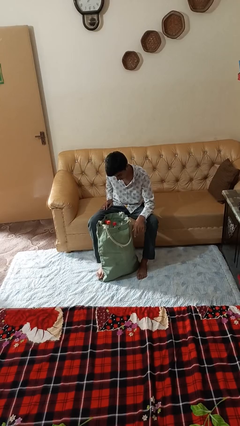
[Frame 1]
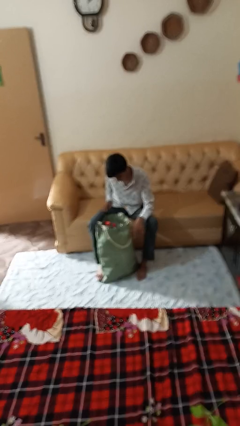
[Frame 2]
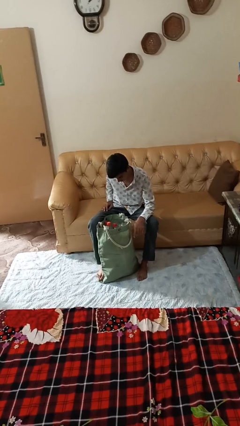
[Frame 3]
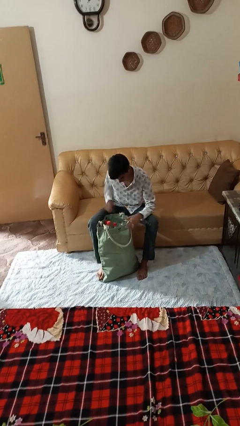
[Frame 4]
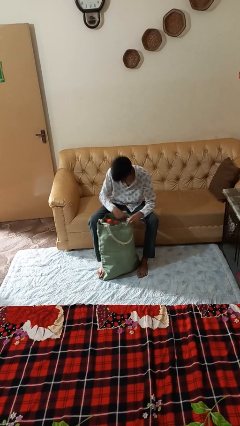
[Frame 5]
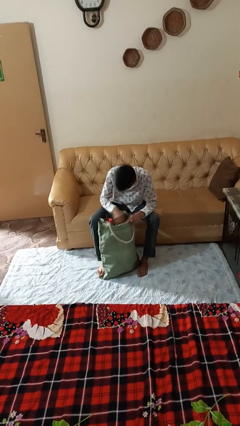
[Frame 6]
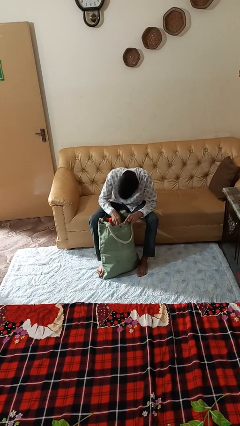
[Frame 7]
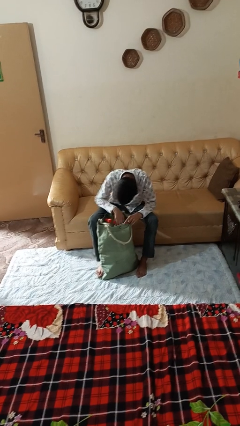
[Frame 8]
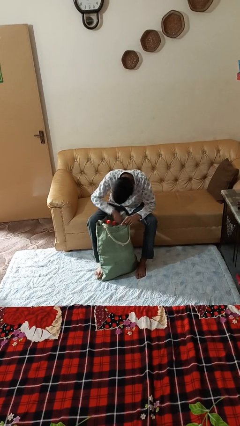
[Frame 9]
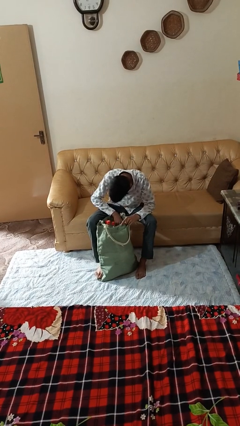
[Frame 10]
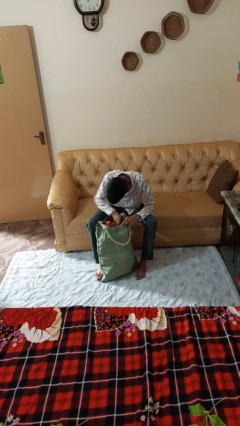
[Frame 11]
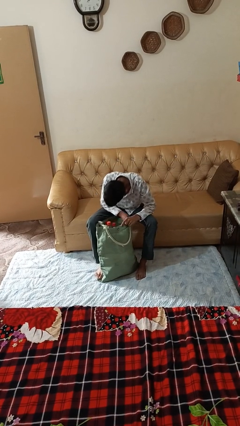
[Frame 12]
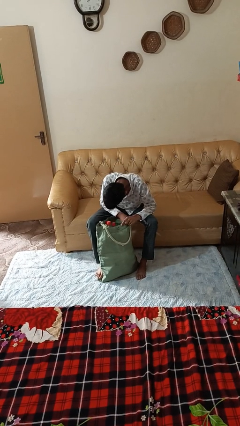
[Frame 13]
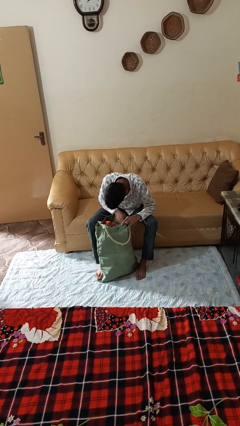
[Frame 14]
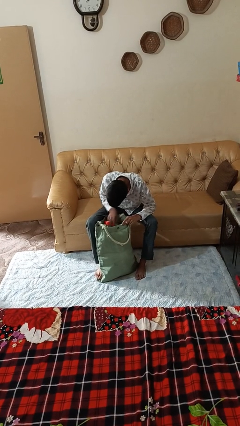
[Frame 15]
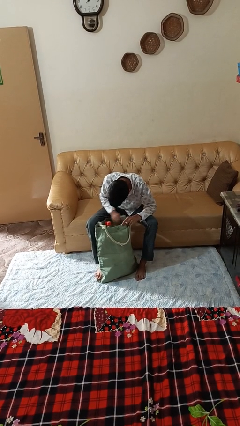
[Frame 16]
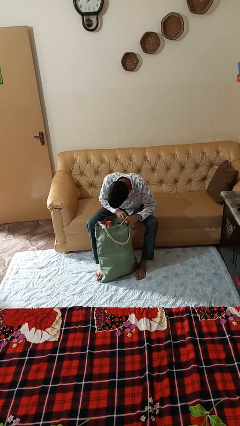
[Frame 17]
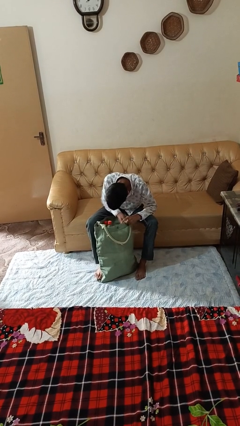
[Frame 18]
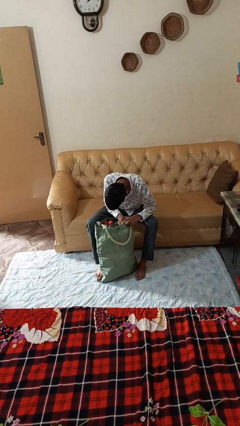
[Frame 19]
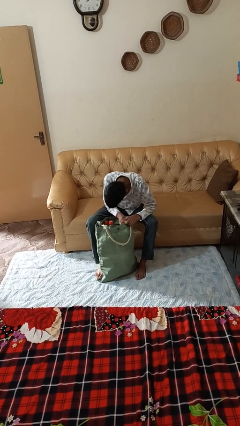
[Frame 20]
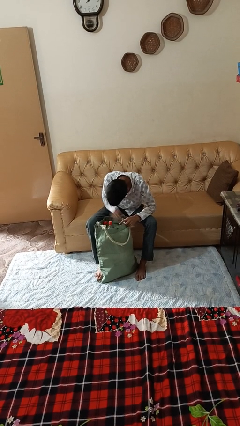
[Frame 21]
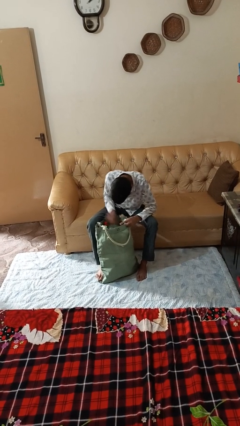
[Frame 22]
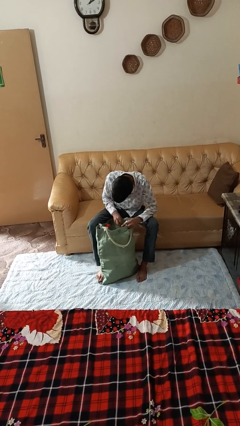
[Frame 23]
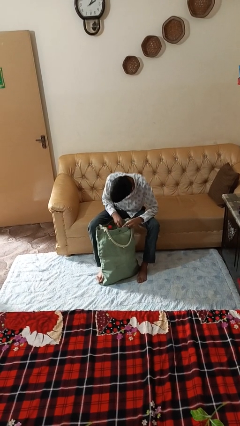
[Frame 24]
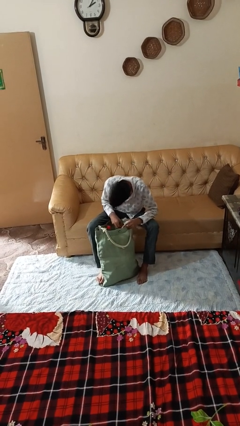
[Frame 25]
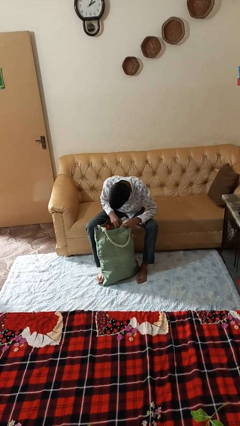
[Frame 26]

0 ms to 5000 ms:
person searches in bag

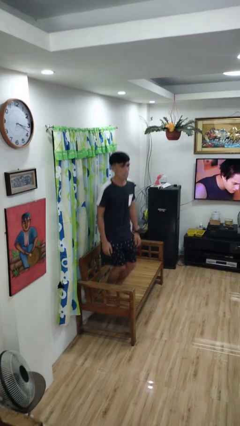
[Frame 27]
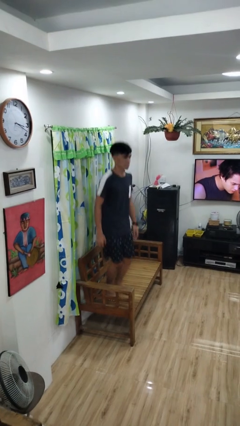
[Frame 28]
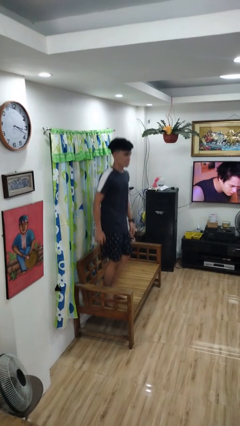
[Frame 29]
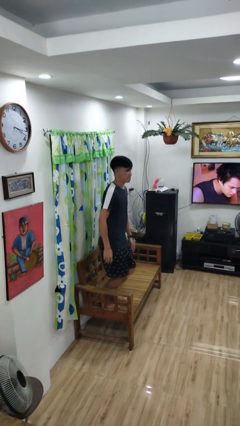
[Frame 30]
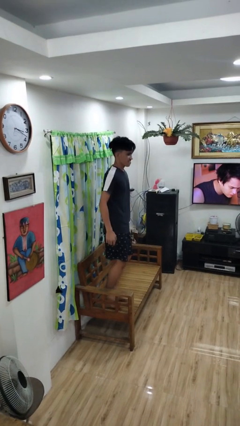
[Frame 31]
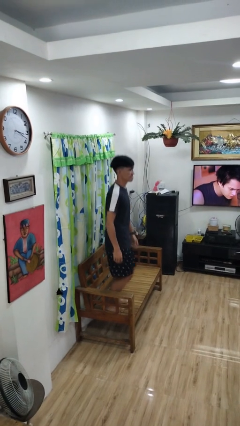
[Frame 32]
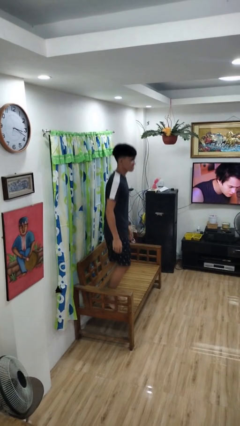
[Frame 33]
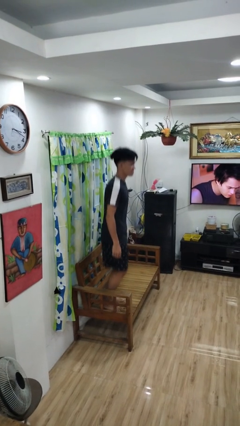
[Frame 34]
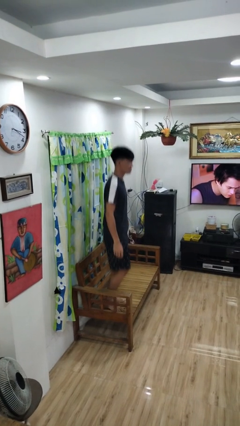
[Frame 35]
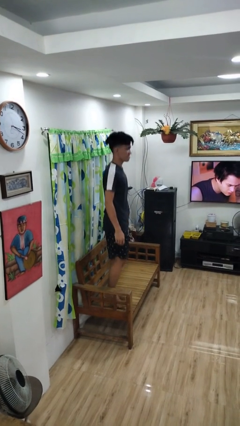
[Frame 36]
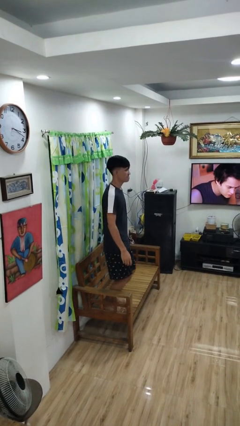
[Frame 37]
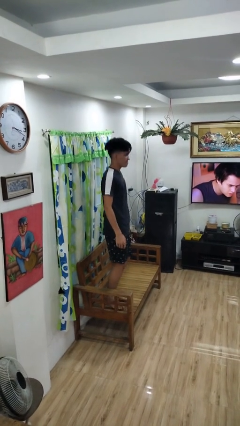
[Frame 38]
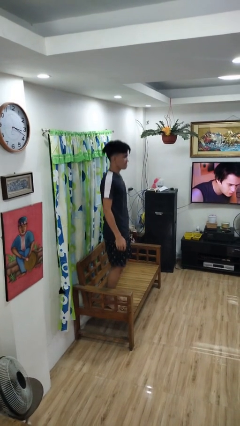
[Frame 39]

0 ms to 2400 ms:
person jumps on couch

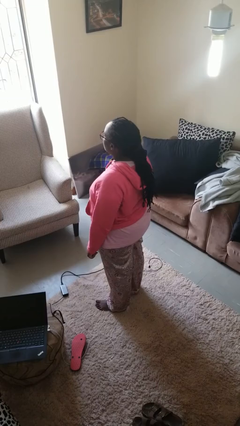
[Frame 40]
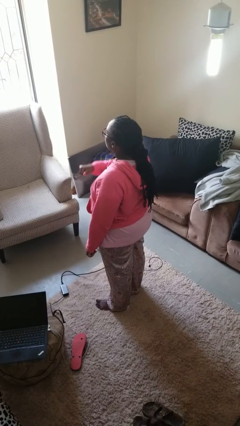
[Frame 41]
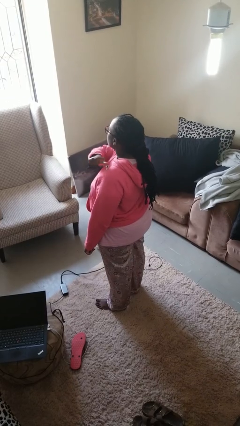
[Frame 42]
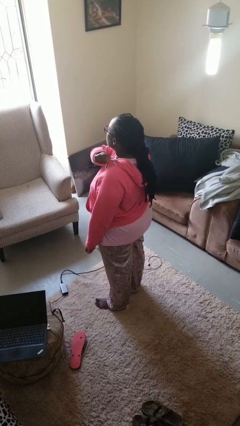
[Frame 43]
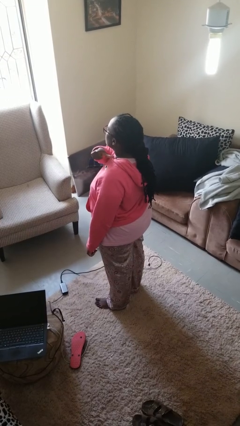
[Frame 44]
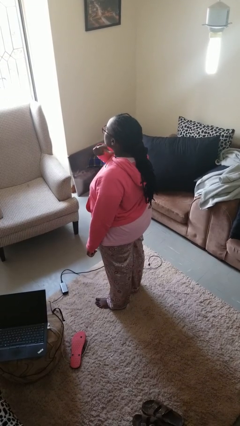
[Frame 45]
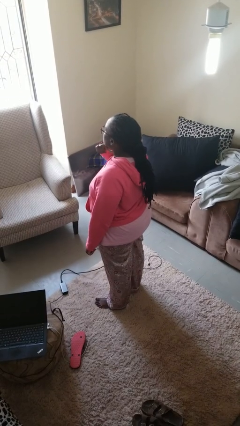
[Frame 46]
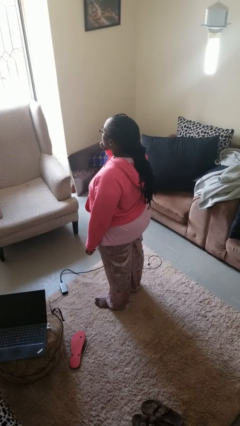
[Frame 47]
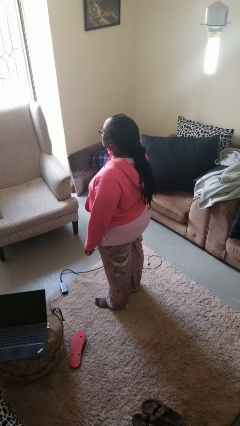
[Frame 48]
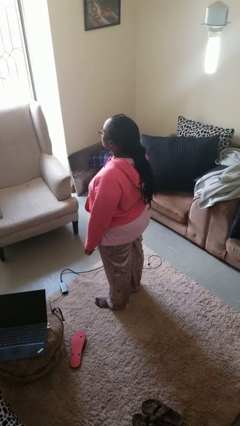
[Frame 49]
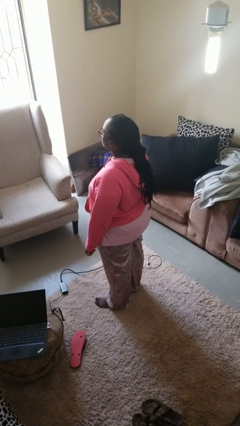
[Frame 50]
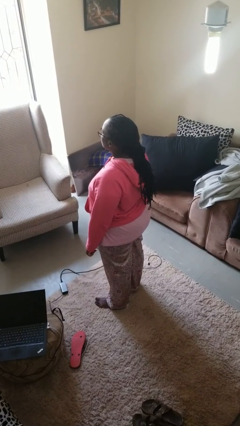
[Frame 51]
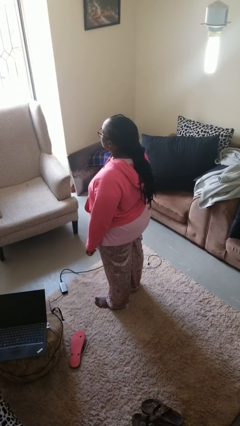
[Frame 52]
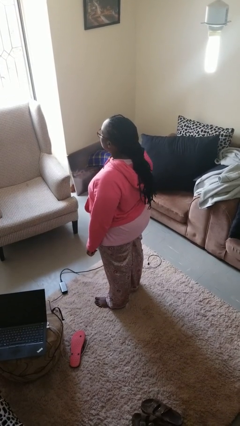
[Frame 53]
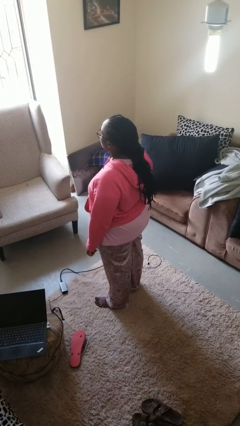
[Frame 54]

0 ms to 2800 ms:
person gestures cut

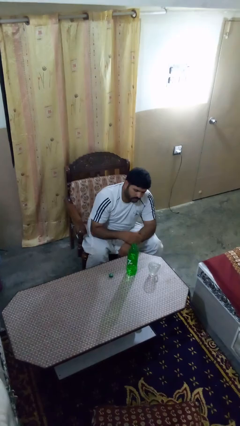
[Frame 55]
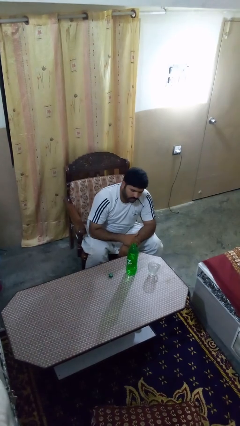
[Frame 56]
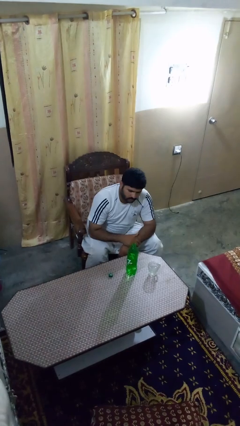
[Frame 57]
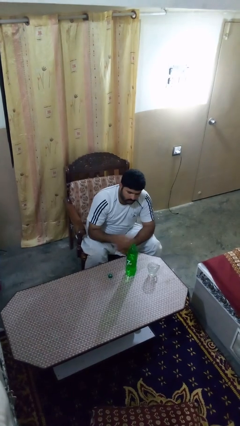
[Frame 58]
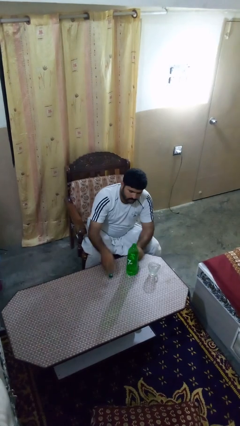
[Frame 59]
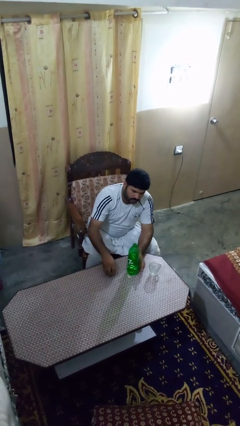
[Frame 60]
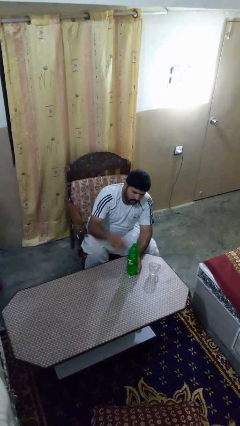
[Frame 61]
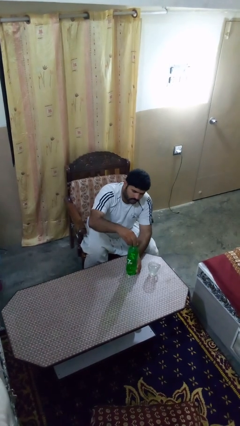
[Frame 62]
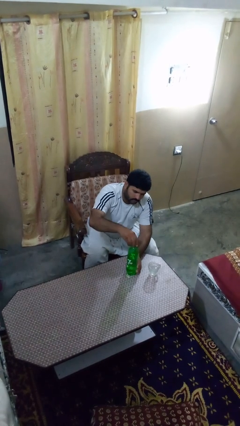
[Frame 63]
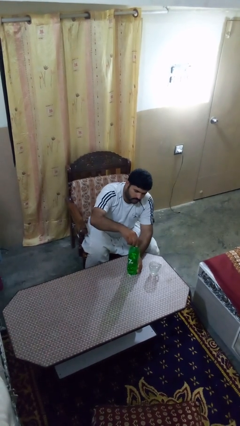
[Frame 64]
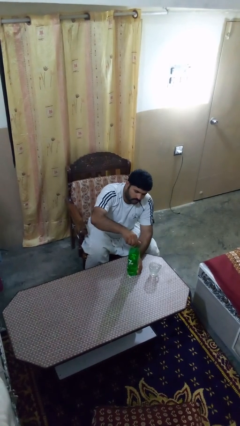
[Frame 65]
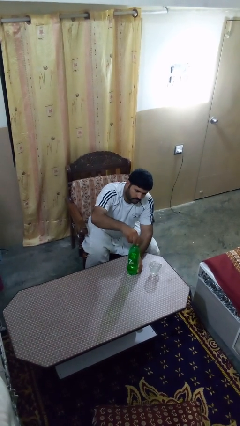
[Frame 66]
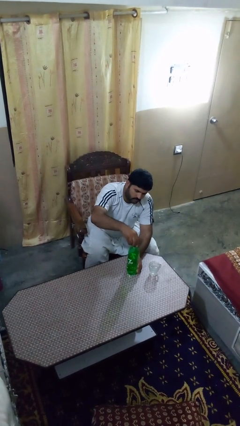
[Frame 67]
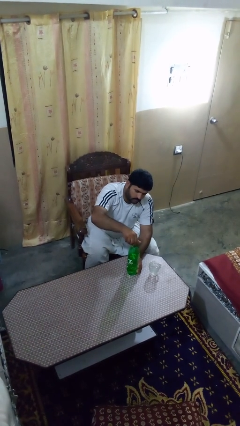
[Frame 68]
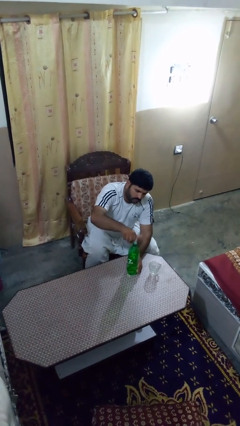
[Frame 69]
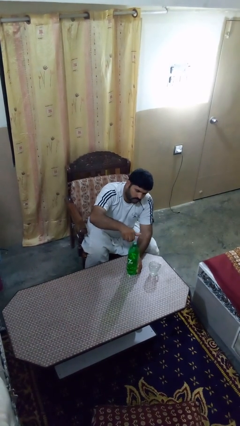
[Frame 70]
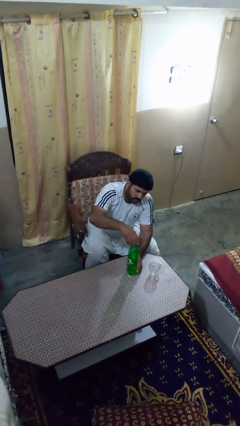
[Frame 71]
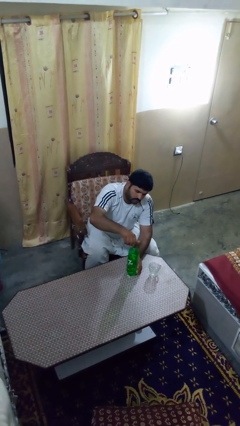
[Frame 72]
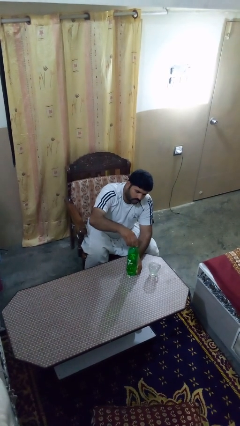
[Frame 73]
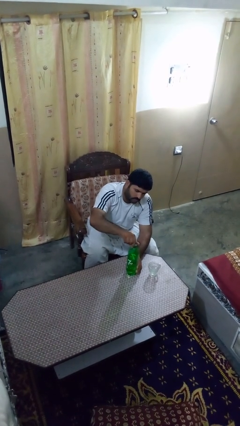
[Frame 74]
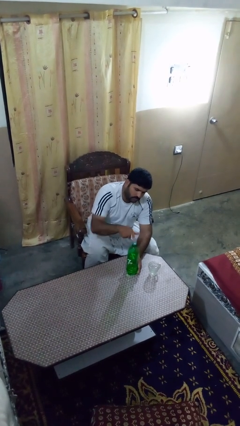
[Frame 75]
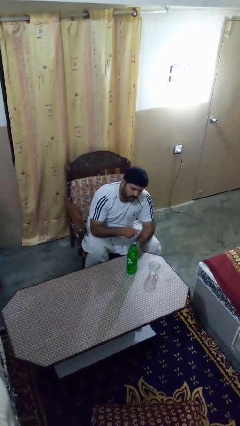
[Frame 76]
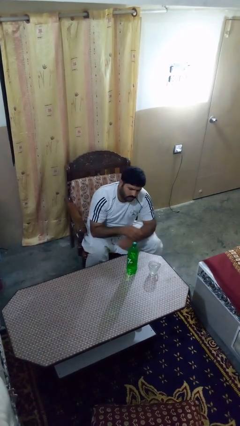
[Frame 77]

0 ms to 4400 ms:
person screws lid to bottle

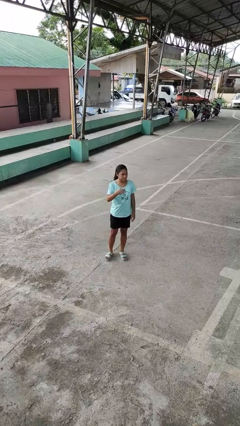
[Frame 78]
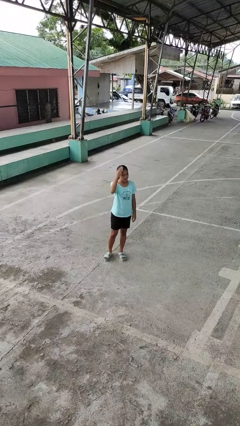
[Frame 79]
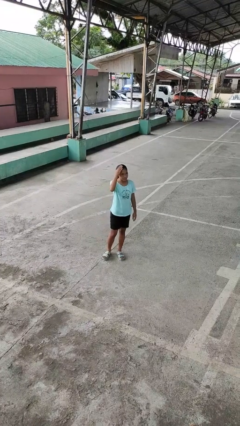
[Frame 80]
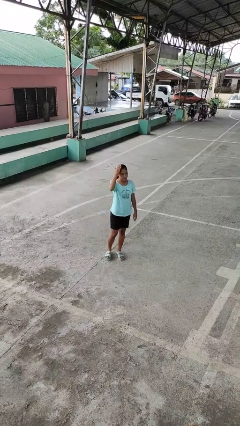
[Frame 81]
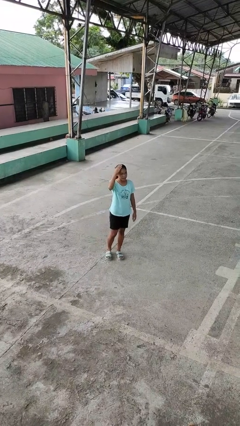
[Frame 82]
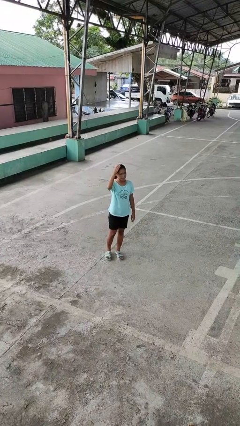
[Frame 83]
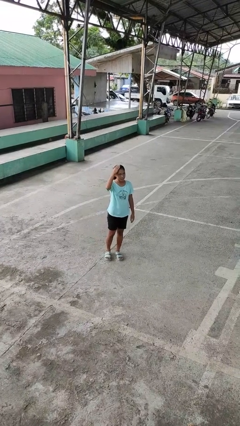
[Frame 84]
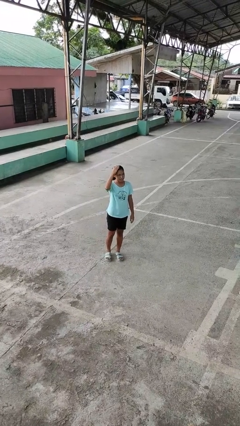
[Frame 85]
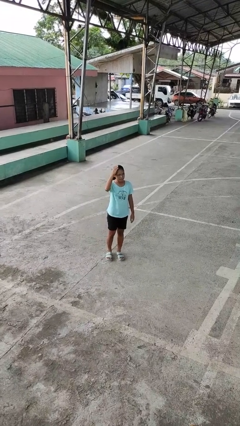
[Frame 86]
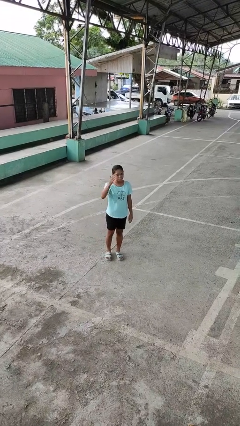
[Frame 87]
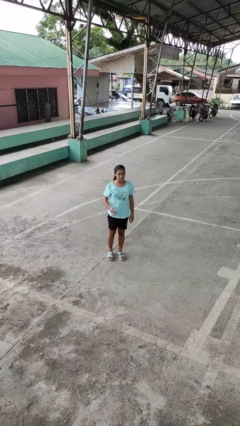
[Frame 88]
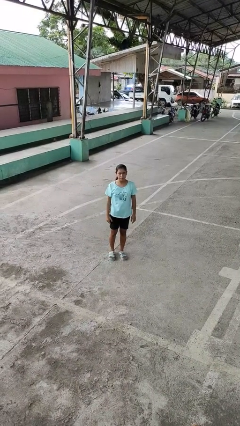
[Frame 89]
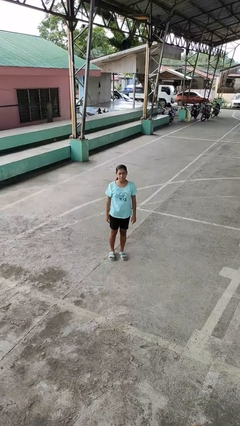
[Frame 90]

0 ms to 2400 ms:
person pats head

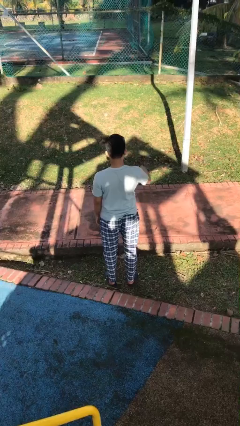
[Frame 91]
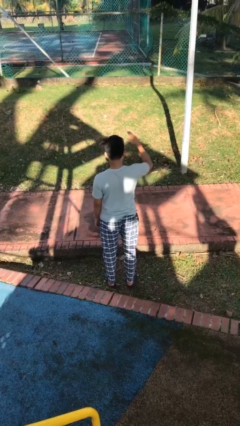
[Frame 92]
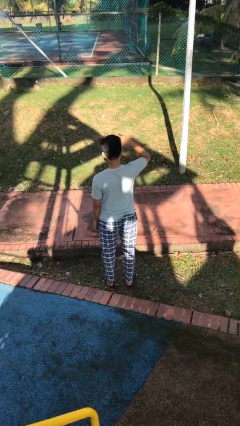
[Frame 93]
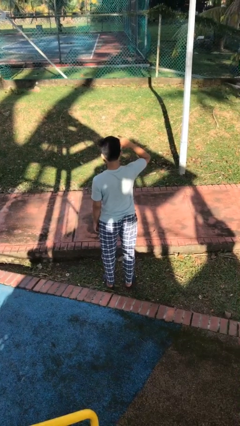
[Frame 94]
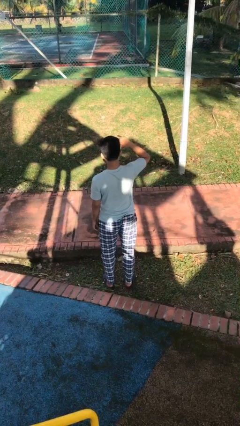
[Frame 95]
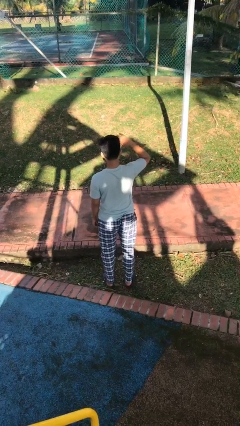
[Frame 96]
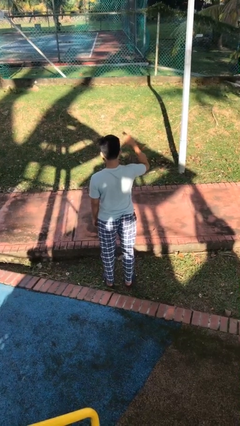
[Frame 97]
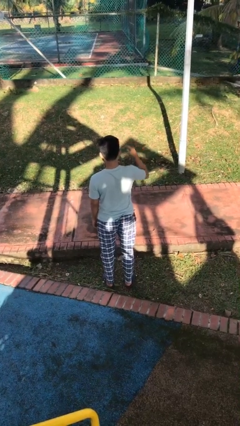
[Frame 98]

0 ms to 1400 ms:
person salutes
